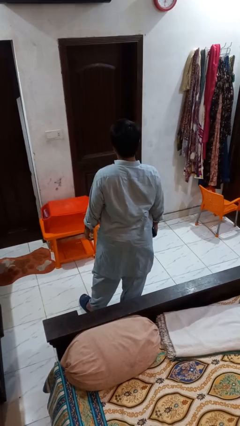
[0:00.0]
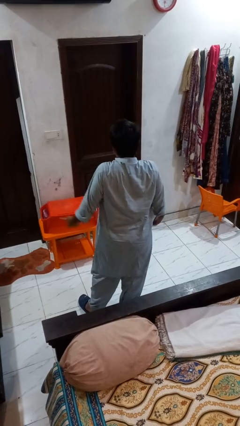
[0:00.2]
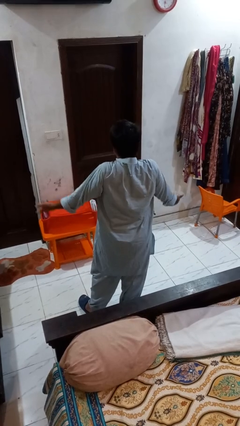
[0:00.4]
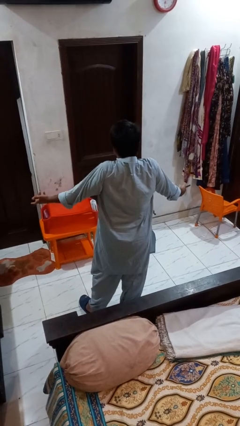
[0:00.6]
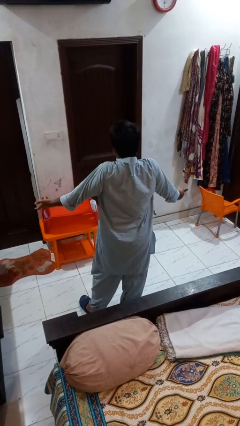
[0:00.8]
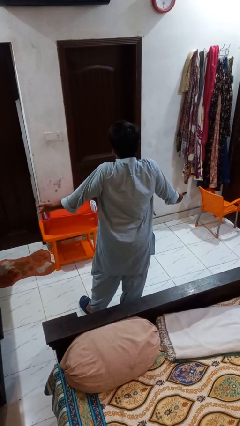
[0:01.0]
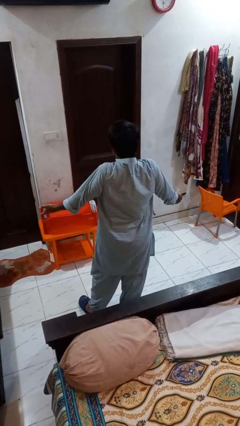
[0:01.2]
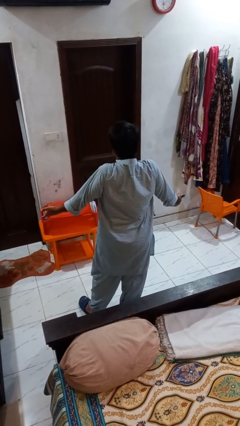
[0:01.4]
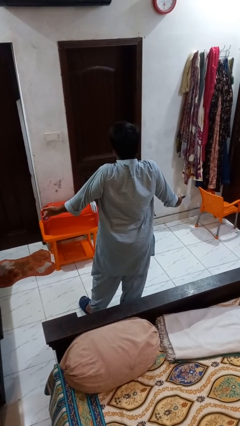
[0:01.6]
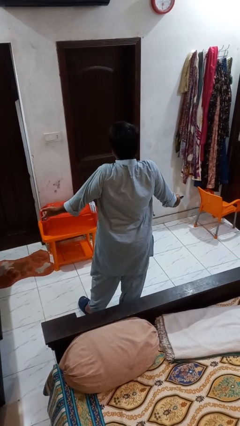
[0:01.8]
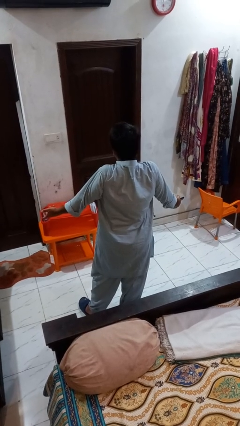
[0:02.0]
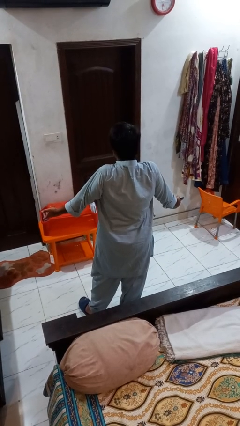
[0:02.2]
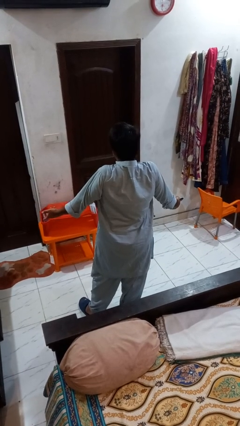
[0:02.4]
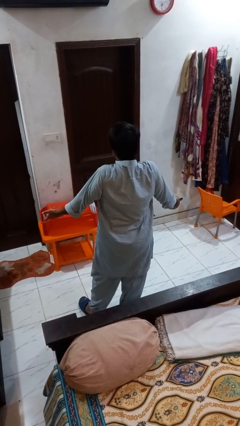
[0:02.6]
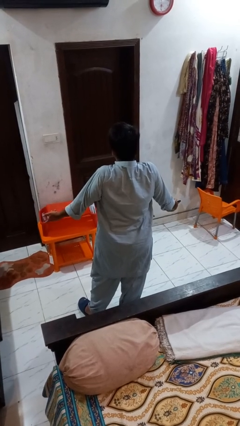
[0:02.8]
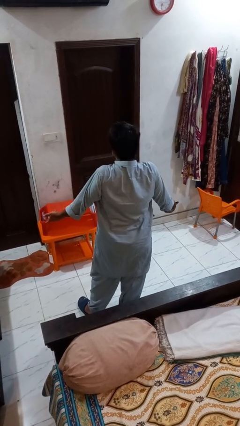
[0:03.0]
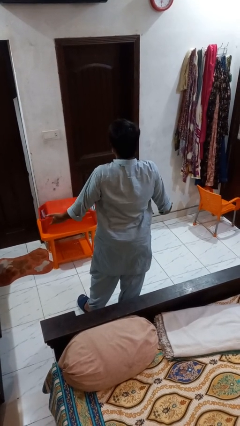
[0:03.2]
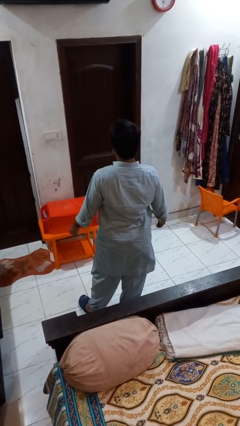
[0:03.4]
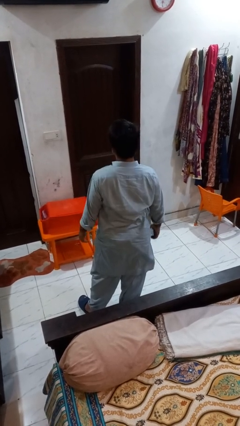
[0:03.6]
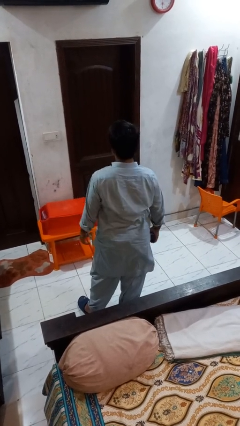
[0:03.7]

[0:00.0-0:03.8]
person shrugs

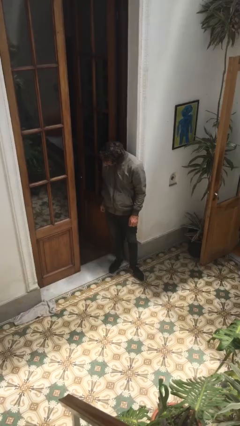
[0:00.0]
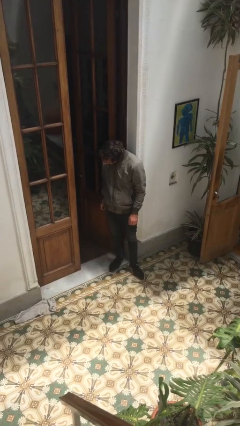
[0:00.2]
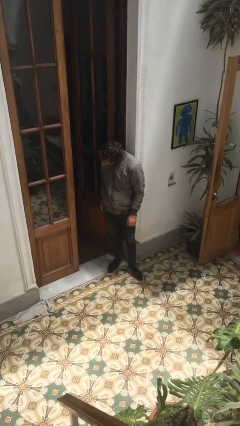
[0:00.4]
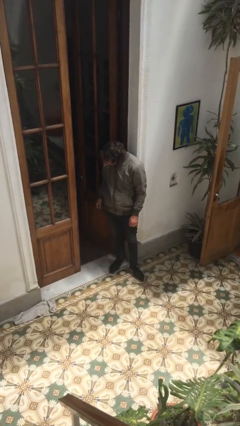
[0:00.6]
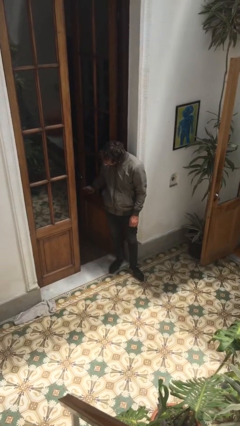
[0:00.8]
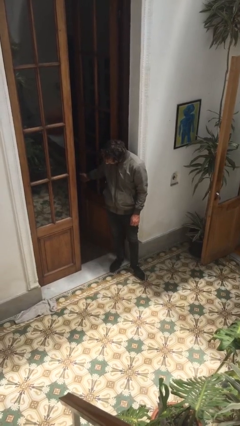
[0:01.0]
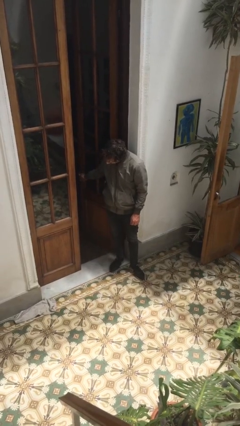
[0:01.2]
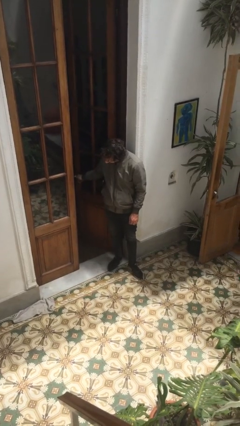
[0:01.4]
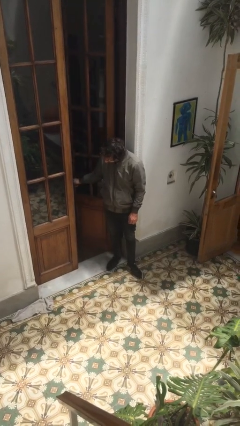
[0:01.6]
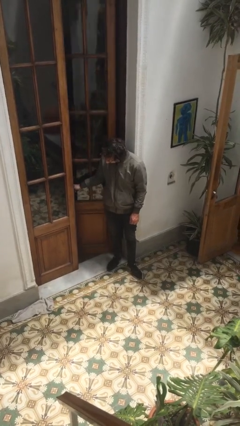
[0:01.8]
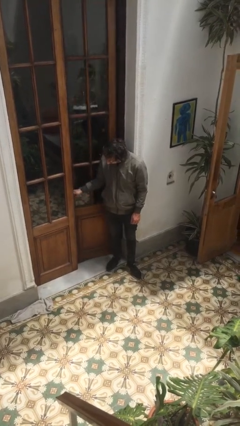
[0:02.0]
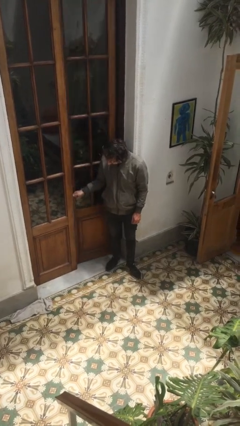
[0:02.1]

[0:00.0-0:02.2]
person closes facility door

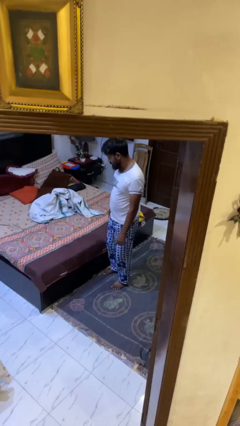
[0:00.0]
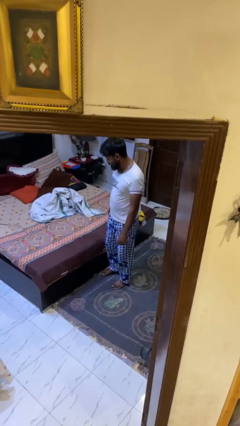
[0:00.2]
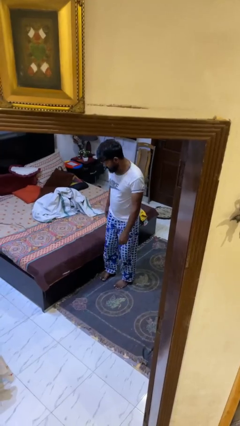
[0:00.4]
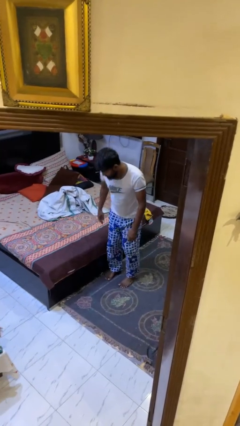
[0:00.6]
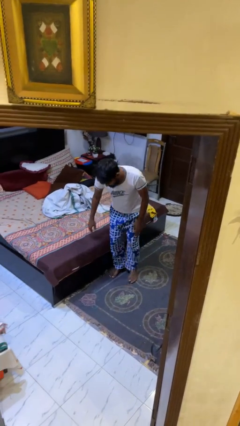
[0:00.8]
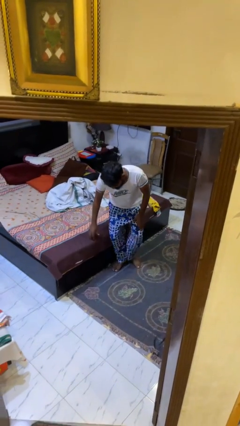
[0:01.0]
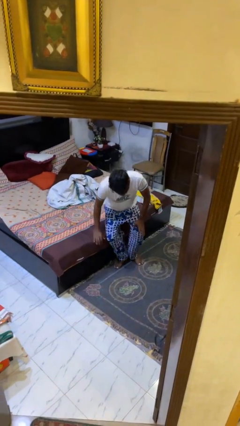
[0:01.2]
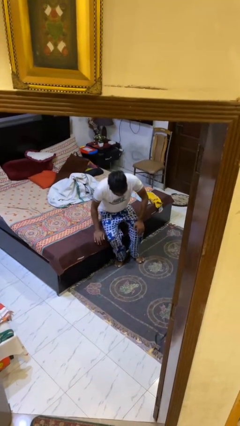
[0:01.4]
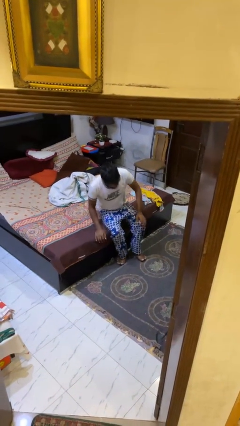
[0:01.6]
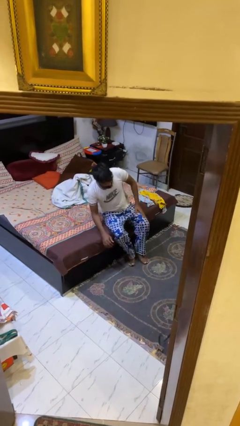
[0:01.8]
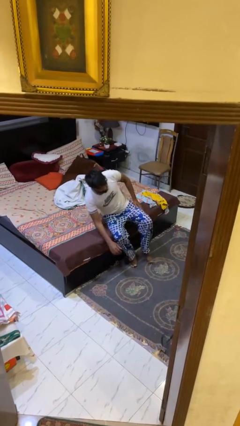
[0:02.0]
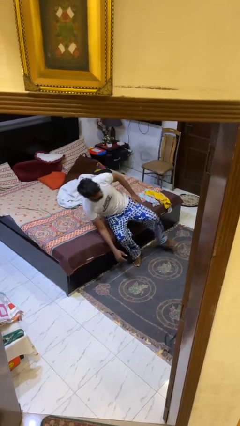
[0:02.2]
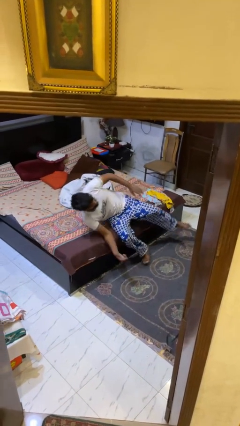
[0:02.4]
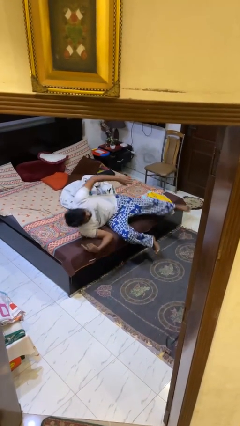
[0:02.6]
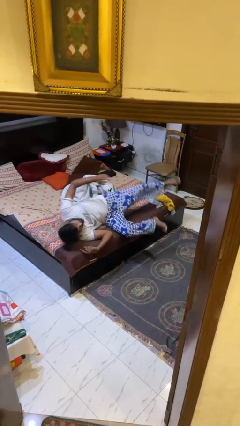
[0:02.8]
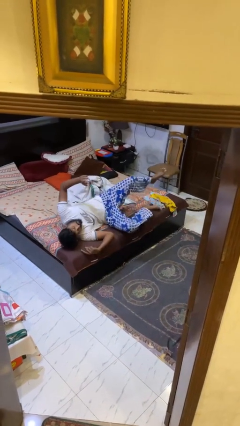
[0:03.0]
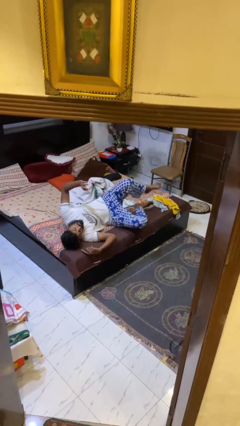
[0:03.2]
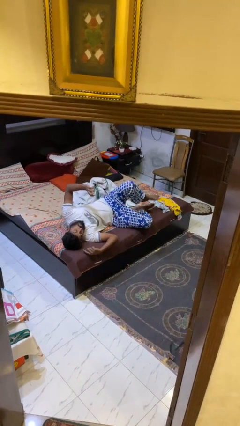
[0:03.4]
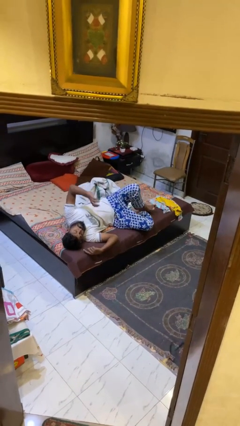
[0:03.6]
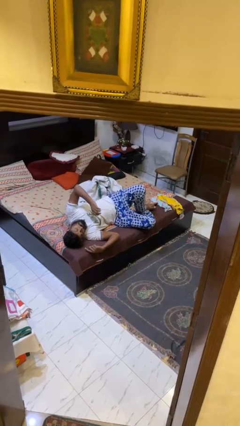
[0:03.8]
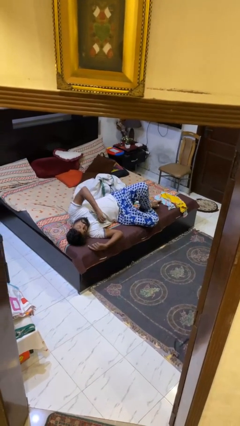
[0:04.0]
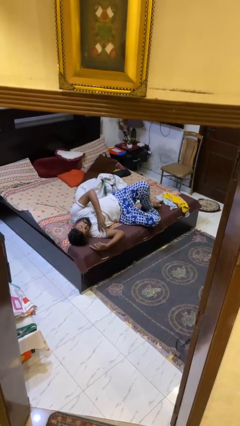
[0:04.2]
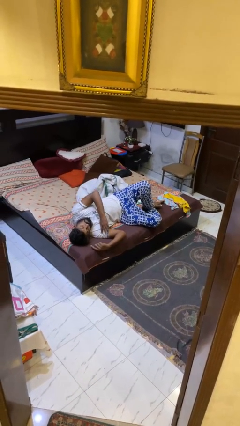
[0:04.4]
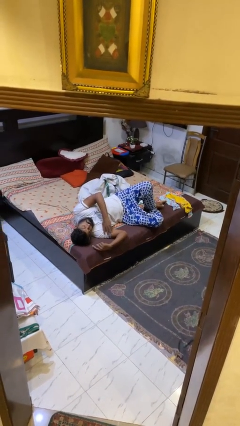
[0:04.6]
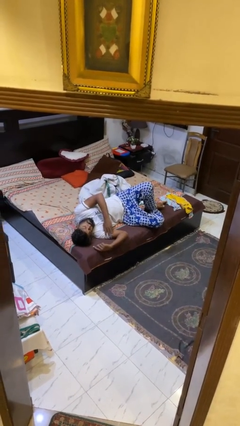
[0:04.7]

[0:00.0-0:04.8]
person lies down on bed

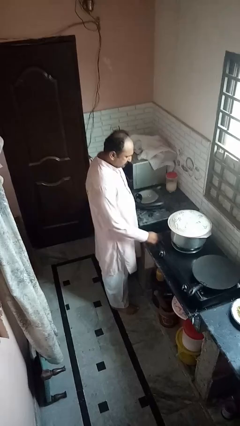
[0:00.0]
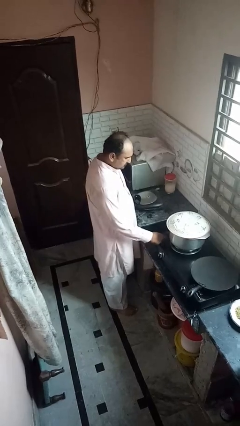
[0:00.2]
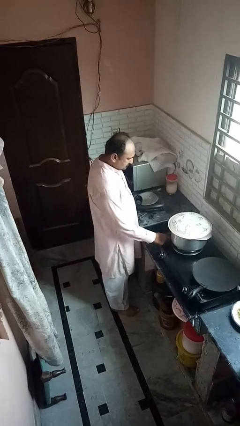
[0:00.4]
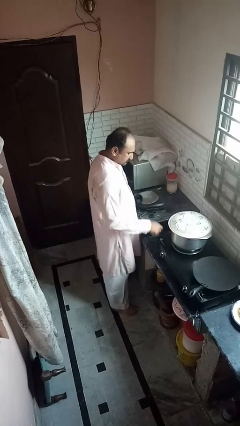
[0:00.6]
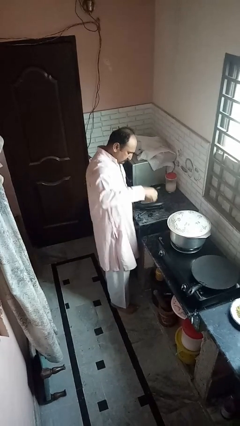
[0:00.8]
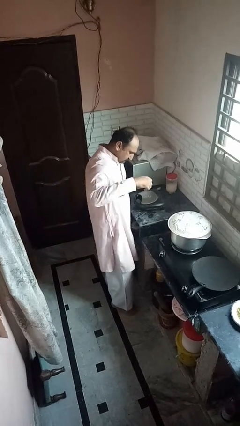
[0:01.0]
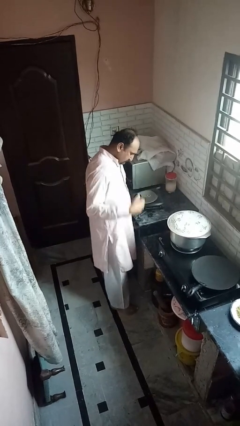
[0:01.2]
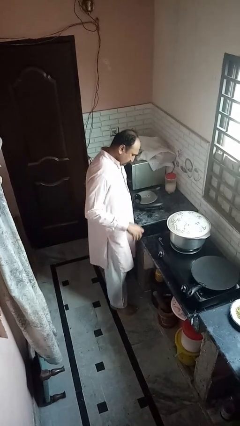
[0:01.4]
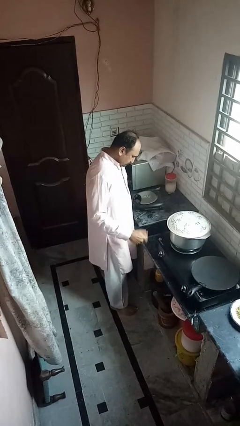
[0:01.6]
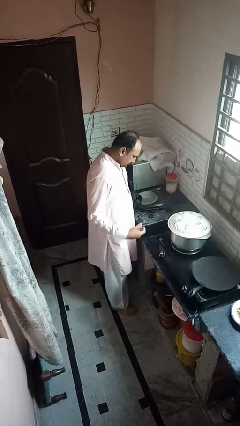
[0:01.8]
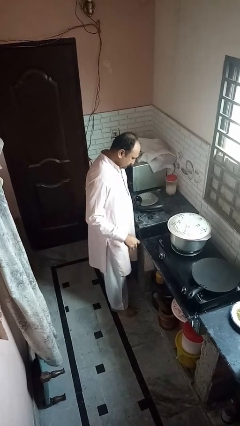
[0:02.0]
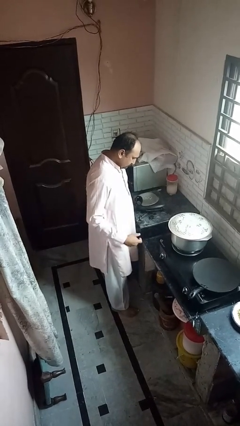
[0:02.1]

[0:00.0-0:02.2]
person burns hand

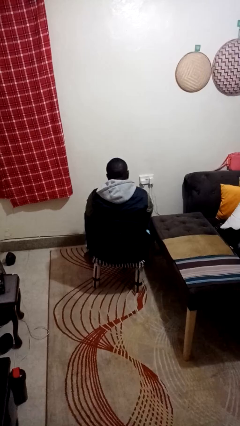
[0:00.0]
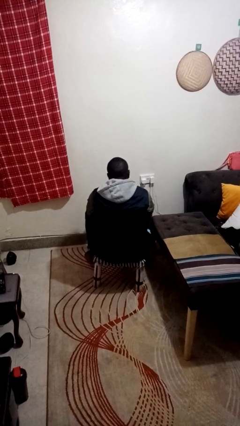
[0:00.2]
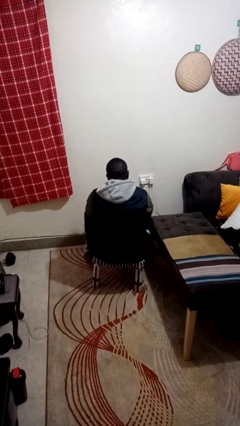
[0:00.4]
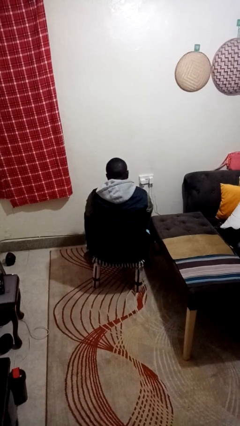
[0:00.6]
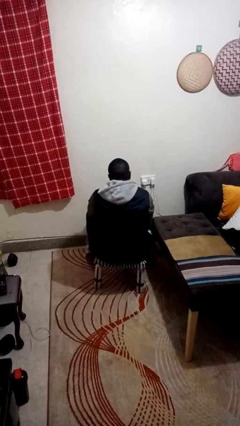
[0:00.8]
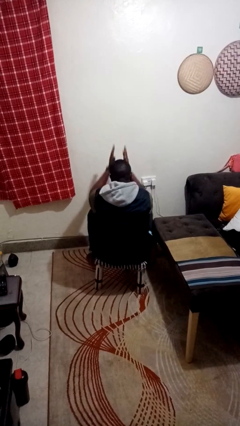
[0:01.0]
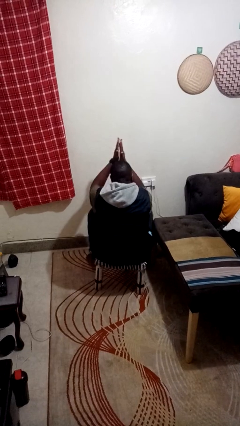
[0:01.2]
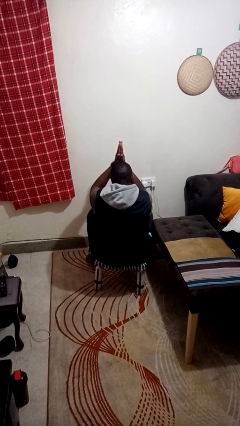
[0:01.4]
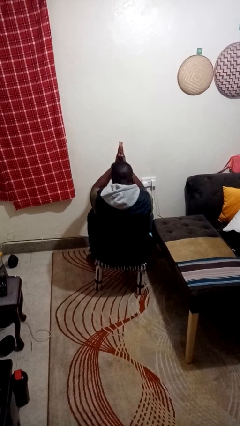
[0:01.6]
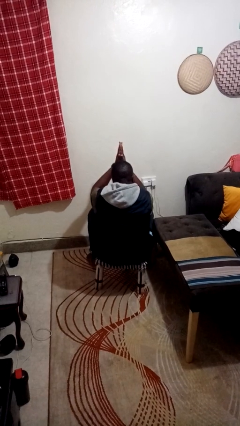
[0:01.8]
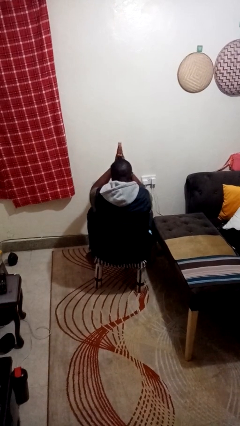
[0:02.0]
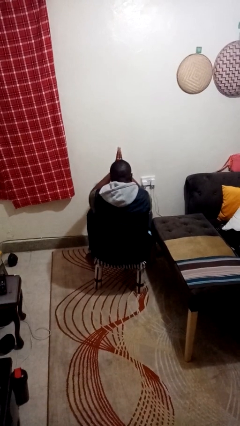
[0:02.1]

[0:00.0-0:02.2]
person claps hands

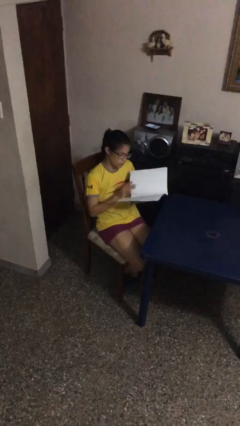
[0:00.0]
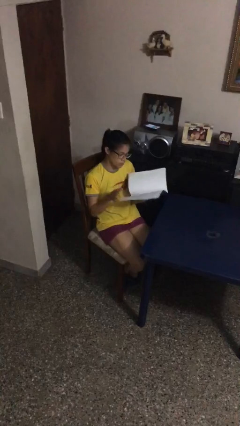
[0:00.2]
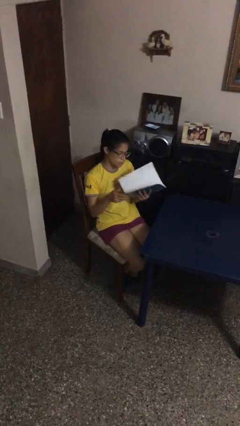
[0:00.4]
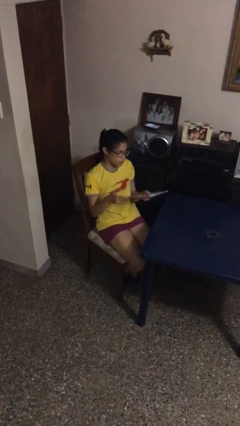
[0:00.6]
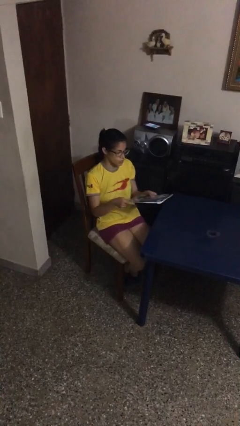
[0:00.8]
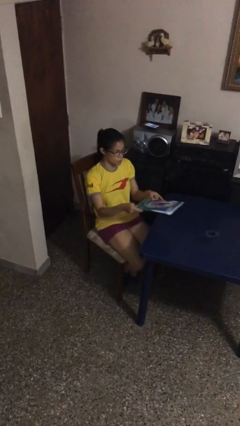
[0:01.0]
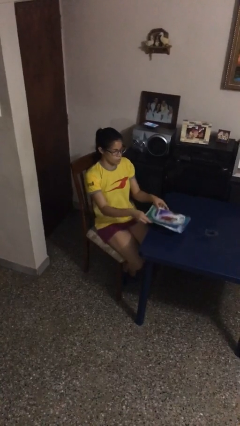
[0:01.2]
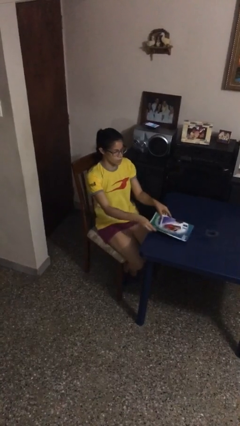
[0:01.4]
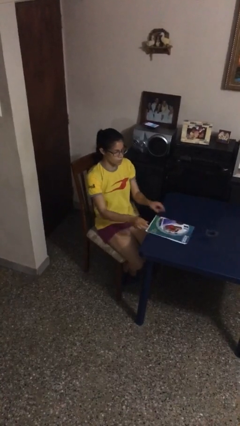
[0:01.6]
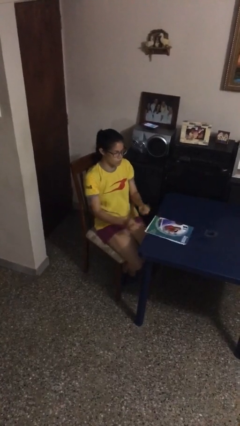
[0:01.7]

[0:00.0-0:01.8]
person puts down object on table

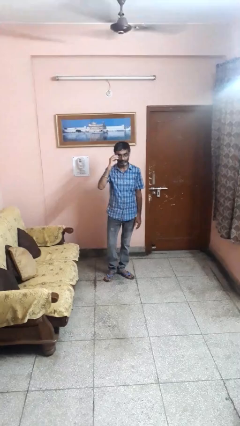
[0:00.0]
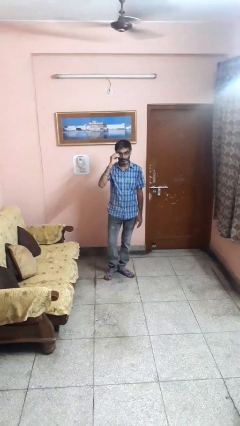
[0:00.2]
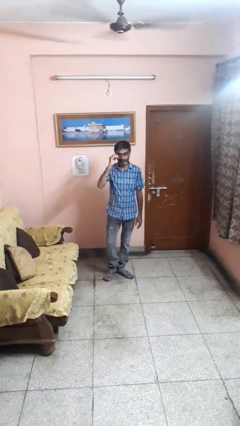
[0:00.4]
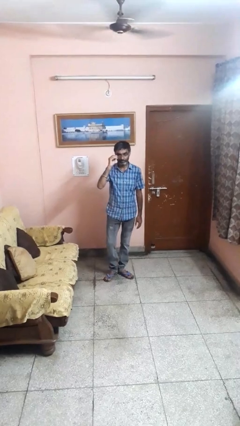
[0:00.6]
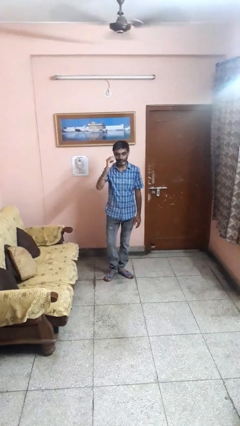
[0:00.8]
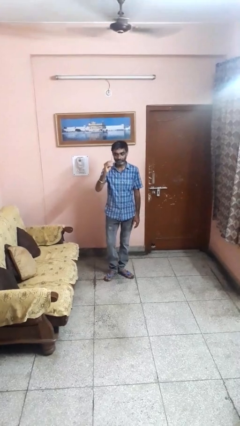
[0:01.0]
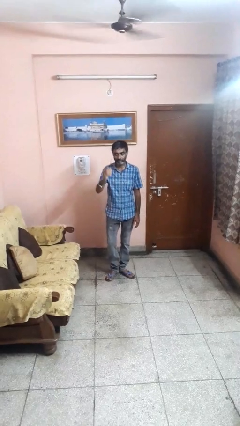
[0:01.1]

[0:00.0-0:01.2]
person takes off glasses
